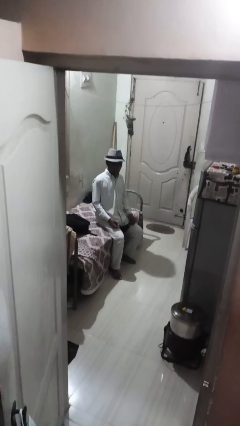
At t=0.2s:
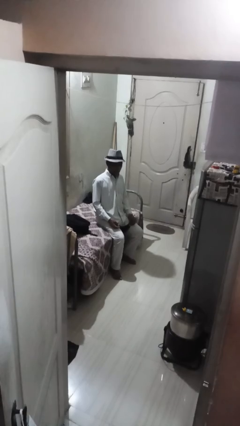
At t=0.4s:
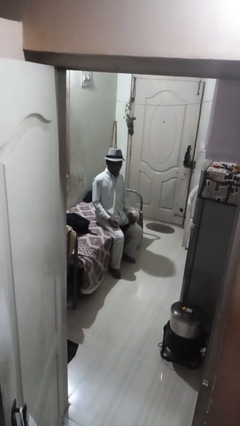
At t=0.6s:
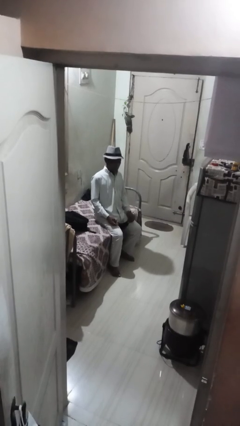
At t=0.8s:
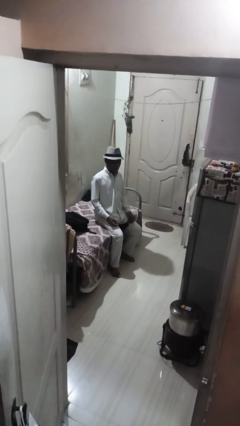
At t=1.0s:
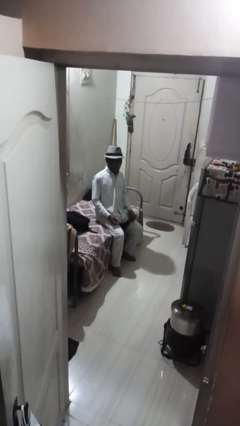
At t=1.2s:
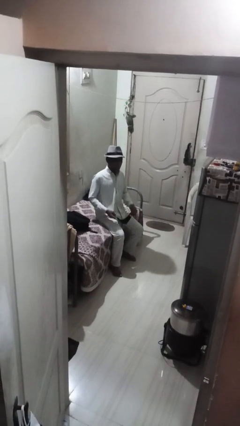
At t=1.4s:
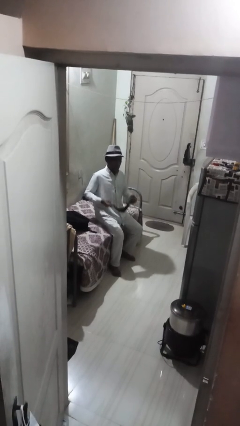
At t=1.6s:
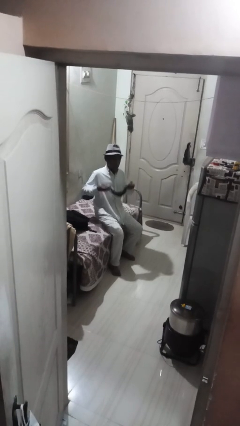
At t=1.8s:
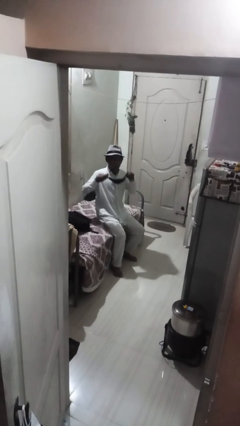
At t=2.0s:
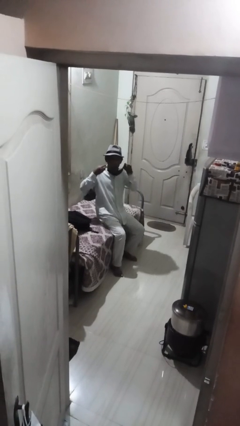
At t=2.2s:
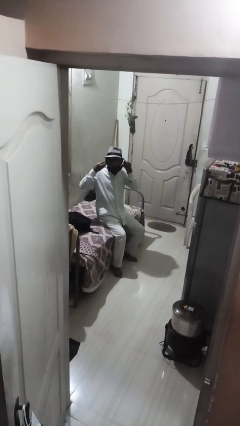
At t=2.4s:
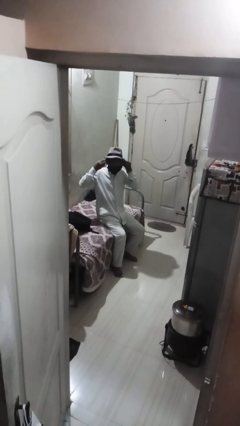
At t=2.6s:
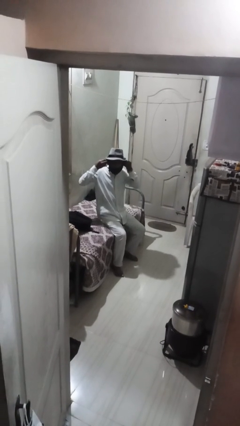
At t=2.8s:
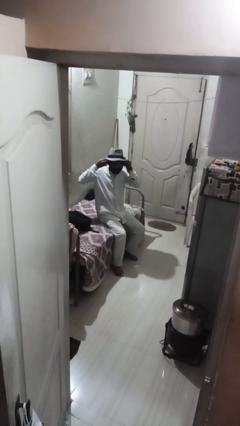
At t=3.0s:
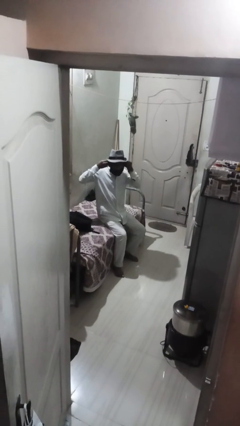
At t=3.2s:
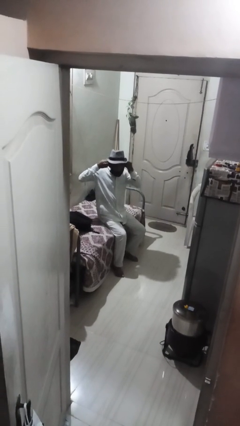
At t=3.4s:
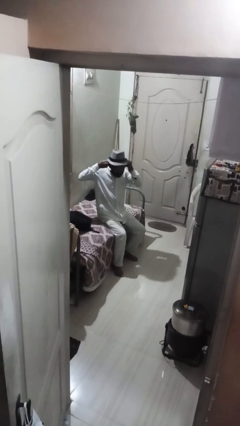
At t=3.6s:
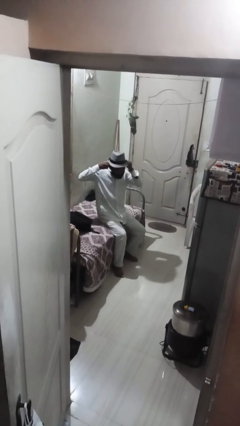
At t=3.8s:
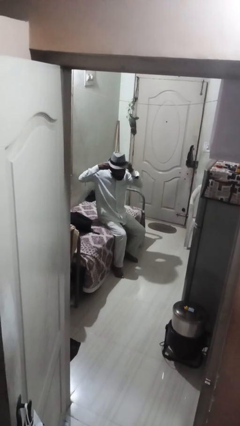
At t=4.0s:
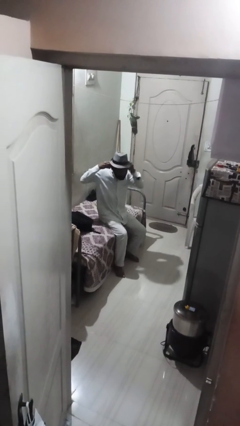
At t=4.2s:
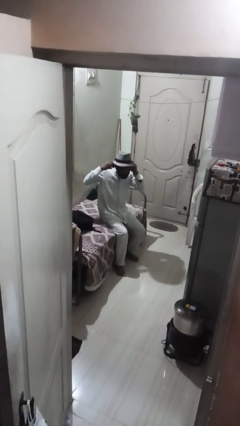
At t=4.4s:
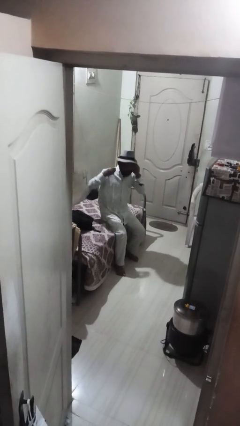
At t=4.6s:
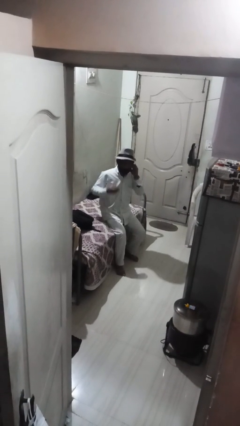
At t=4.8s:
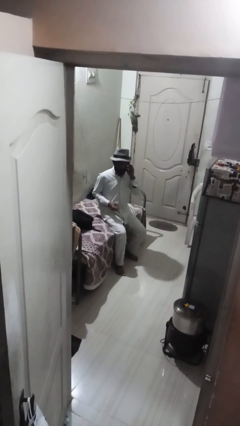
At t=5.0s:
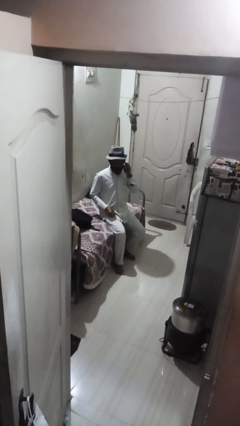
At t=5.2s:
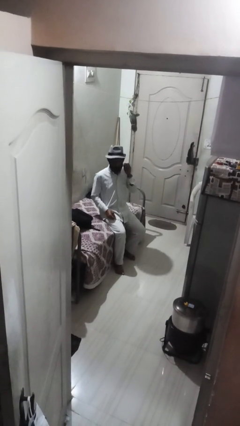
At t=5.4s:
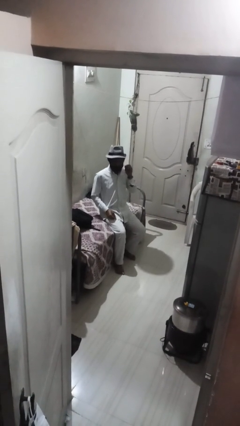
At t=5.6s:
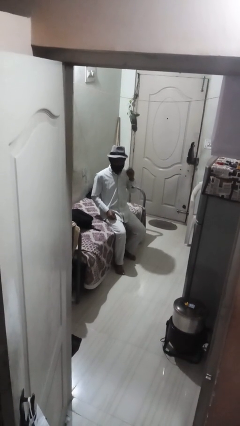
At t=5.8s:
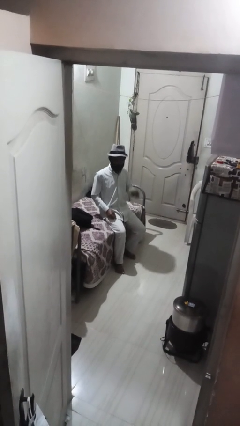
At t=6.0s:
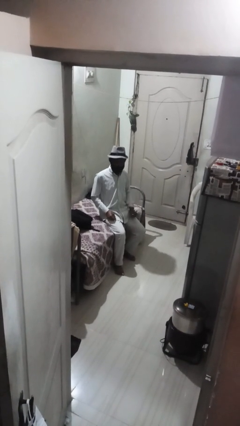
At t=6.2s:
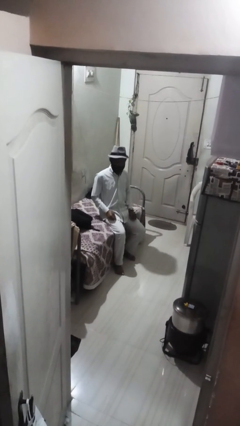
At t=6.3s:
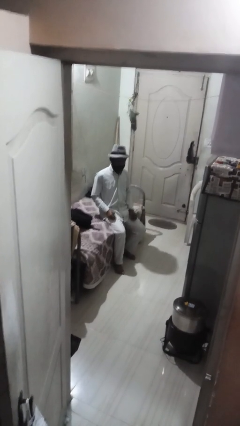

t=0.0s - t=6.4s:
person puts on facemask

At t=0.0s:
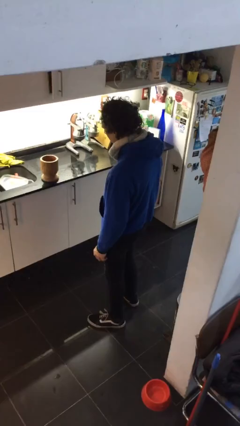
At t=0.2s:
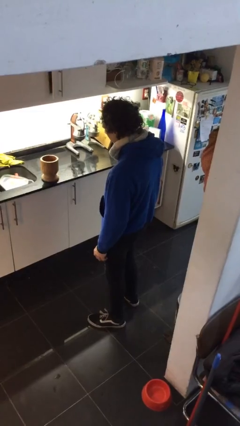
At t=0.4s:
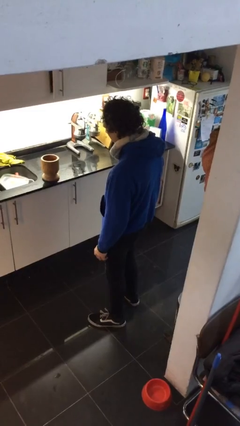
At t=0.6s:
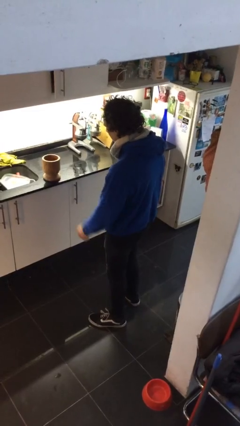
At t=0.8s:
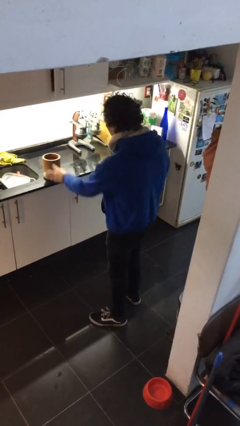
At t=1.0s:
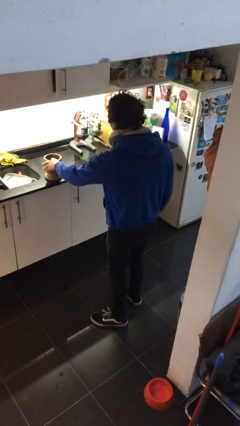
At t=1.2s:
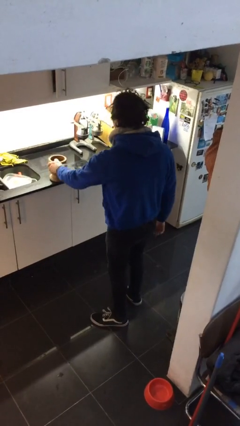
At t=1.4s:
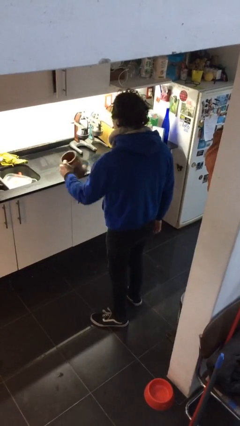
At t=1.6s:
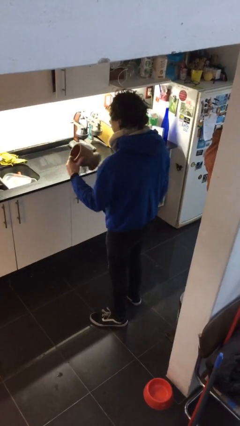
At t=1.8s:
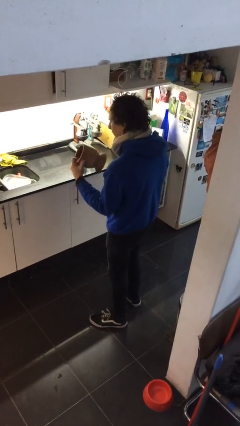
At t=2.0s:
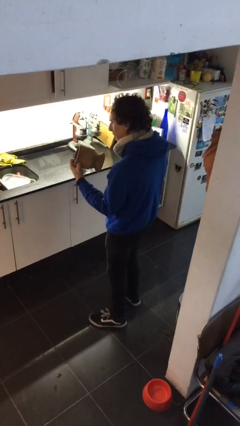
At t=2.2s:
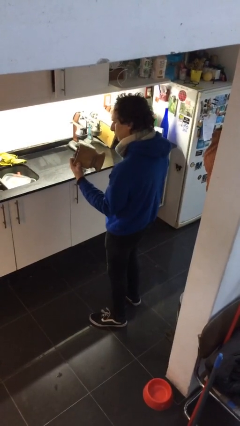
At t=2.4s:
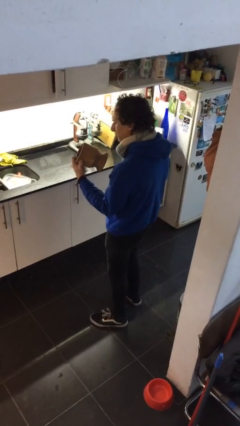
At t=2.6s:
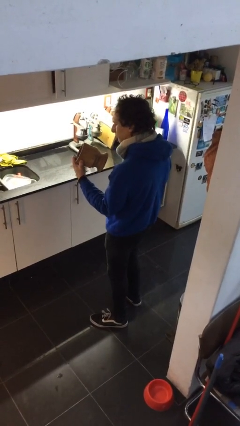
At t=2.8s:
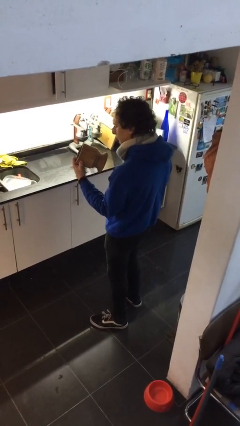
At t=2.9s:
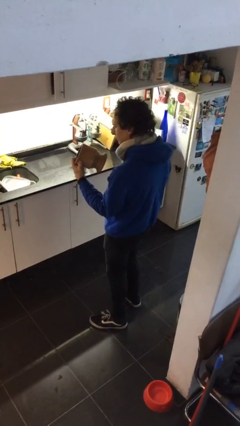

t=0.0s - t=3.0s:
person picks up object from countertop

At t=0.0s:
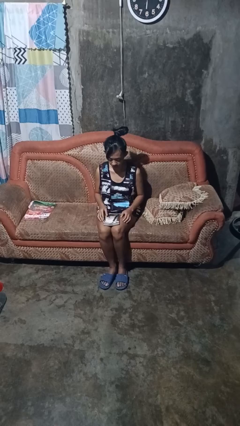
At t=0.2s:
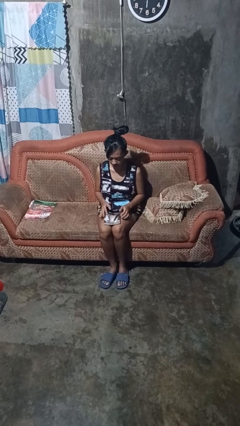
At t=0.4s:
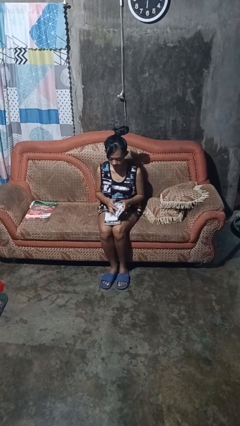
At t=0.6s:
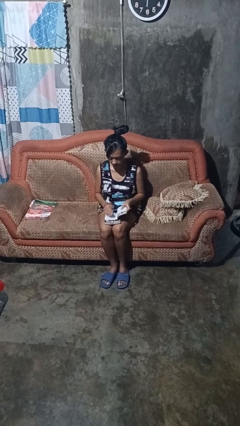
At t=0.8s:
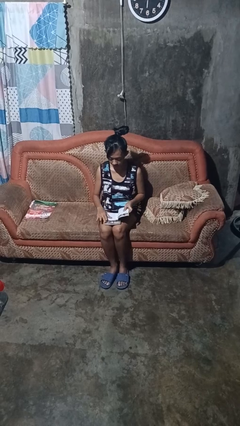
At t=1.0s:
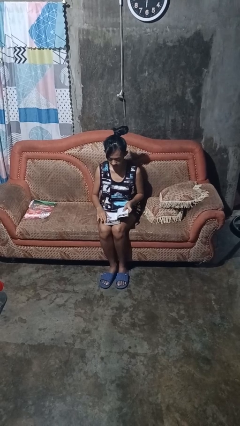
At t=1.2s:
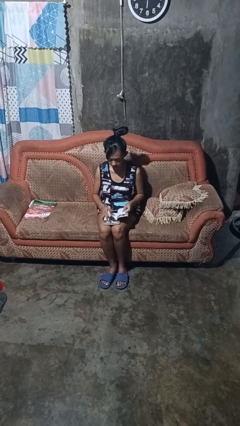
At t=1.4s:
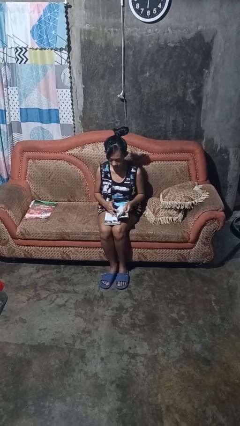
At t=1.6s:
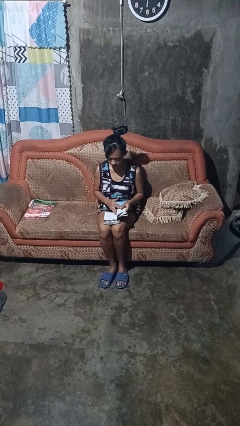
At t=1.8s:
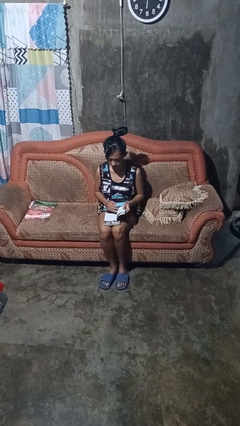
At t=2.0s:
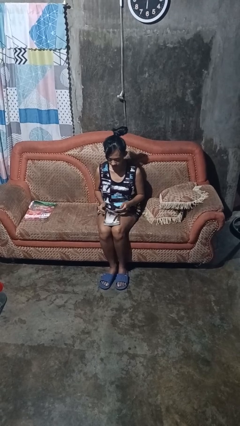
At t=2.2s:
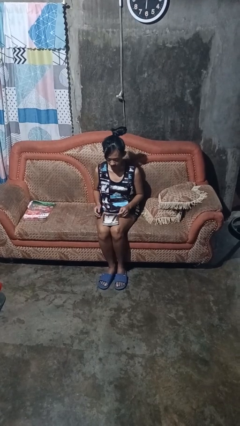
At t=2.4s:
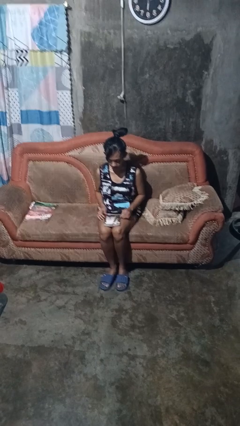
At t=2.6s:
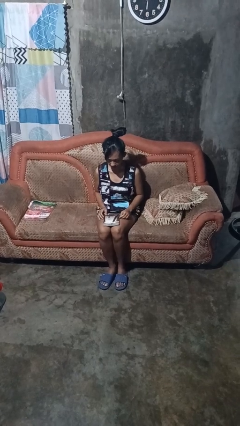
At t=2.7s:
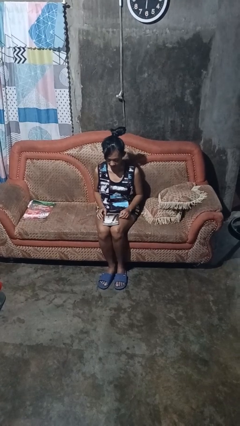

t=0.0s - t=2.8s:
person reads book

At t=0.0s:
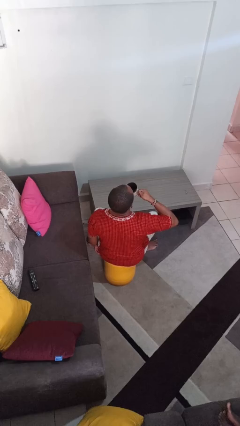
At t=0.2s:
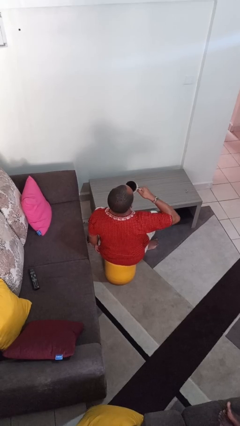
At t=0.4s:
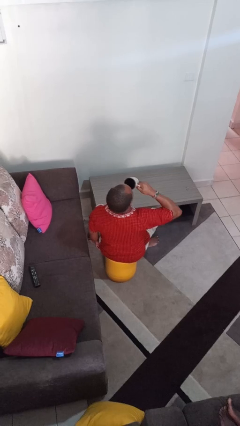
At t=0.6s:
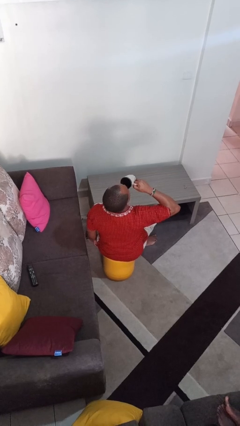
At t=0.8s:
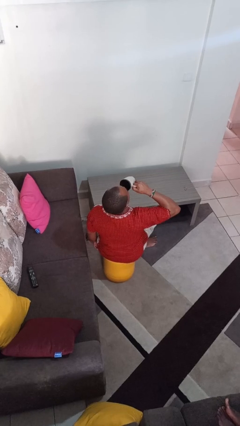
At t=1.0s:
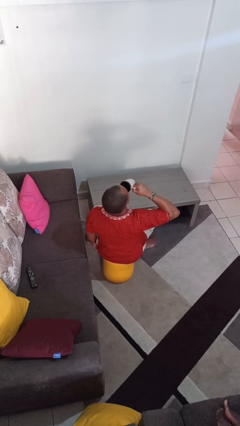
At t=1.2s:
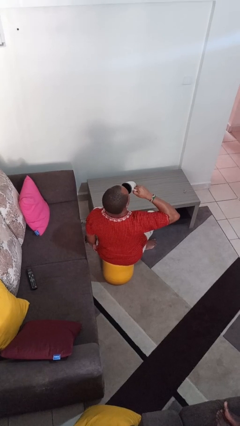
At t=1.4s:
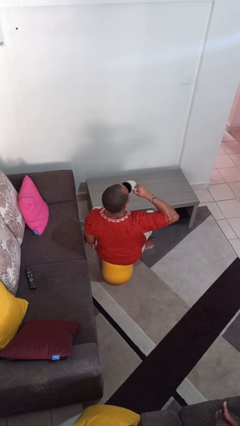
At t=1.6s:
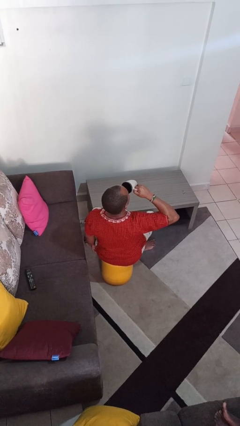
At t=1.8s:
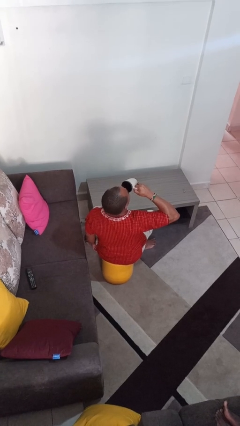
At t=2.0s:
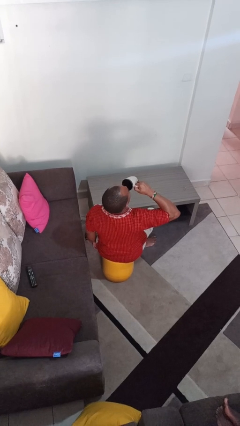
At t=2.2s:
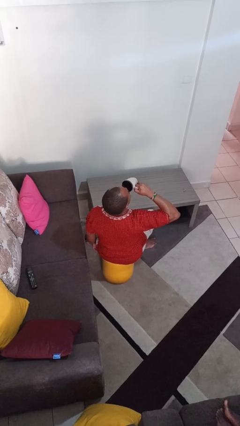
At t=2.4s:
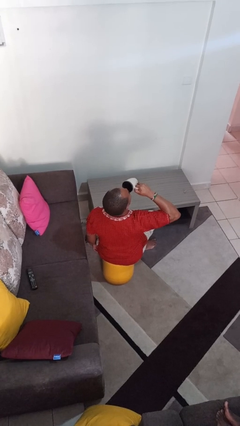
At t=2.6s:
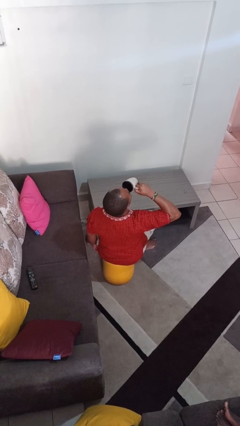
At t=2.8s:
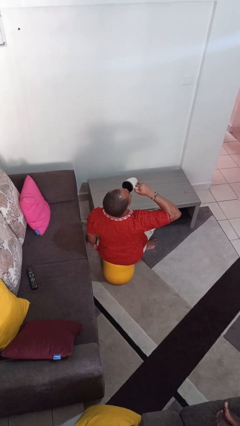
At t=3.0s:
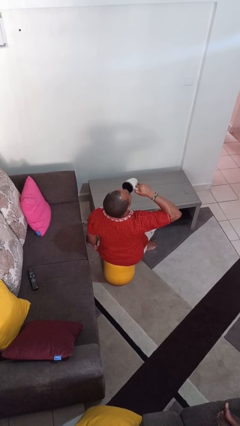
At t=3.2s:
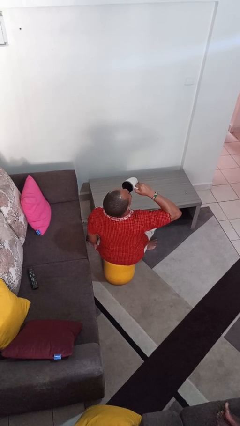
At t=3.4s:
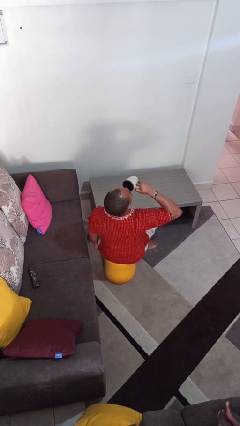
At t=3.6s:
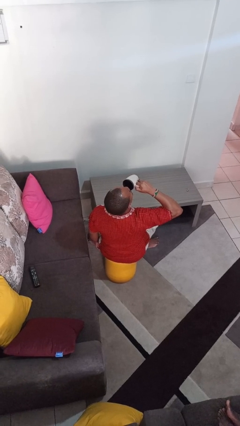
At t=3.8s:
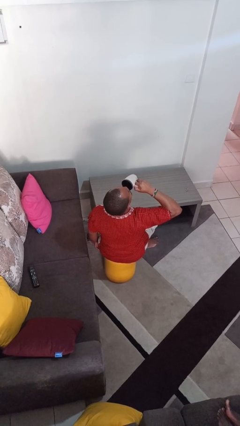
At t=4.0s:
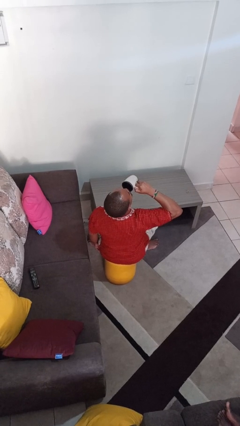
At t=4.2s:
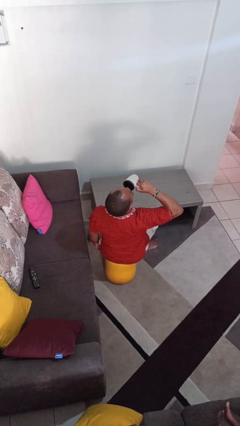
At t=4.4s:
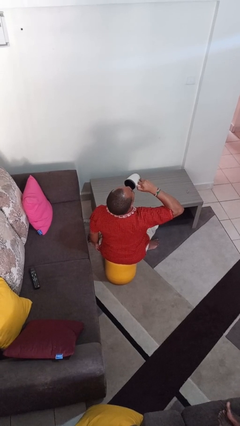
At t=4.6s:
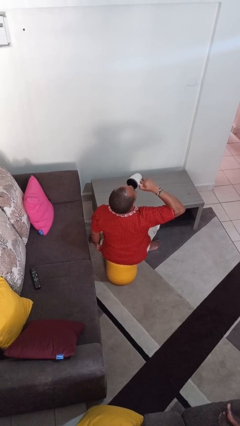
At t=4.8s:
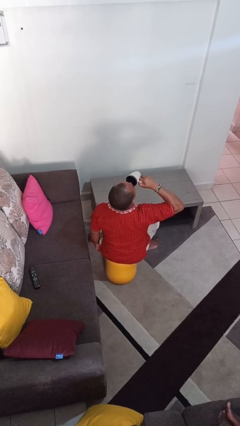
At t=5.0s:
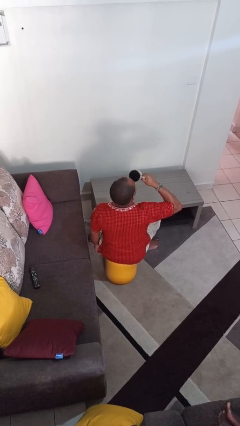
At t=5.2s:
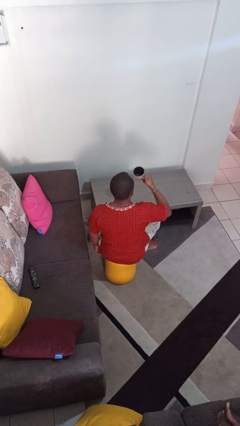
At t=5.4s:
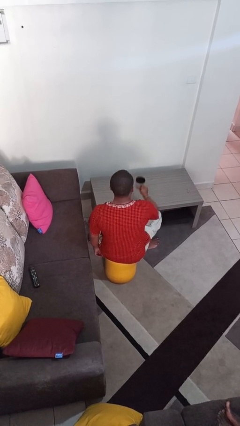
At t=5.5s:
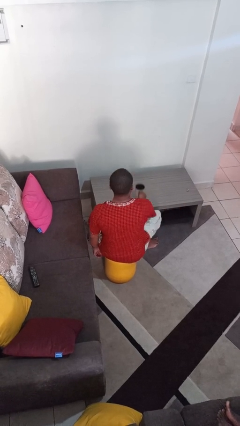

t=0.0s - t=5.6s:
person drinks from mug
